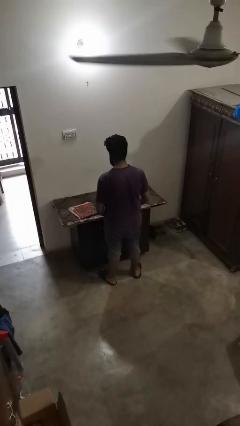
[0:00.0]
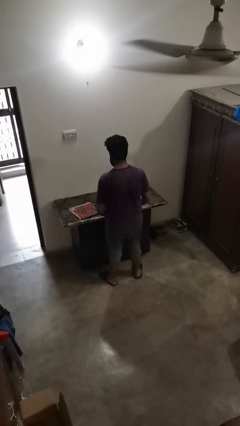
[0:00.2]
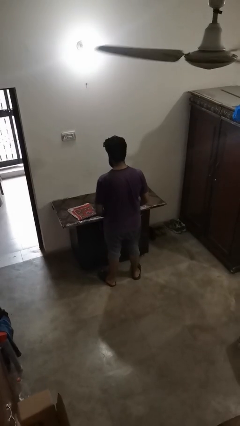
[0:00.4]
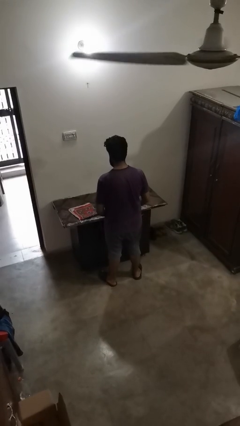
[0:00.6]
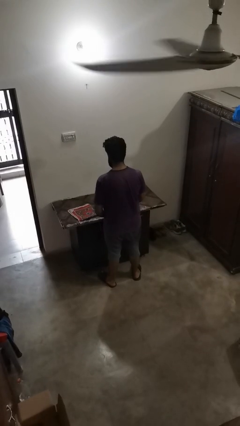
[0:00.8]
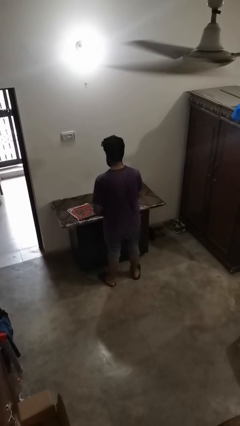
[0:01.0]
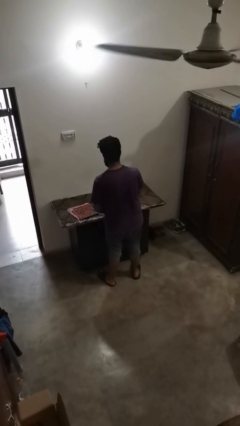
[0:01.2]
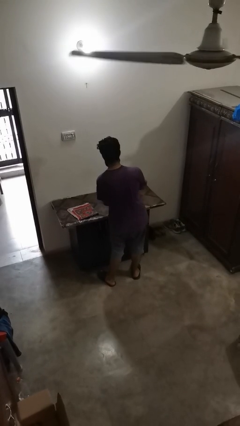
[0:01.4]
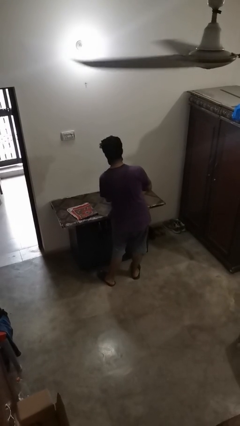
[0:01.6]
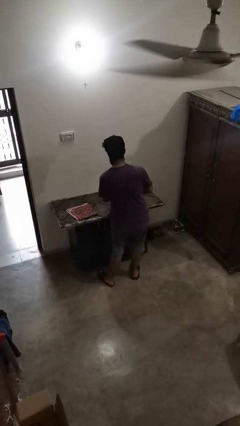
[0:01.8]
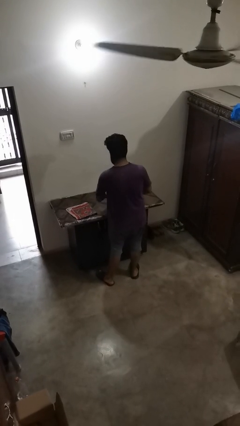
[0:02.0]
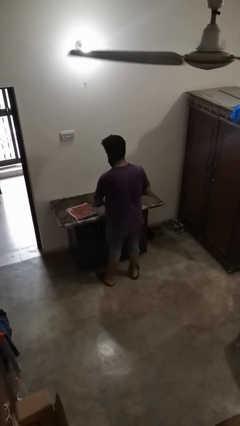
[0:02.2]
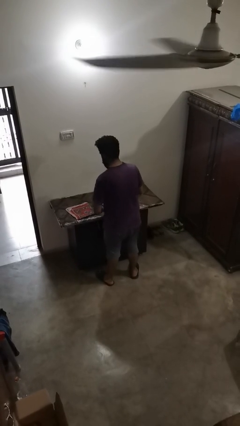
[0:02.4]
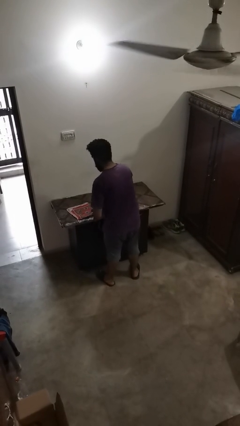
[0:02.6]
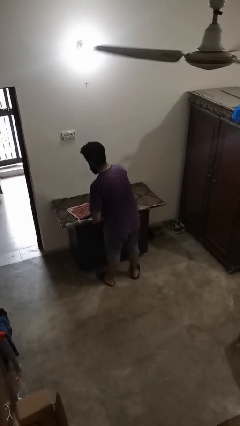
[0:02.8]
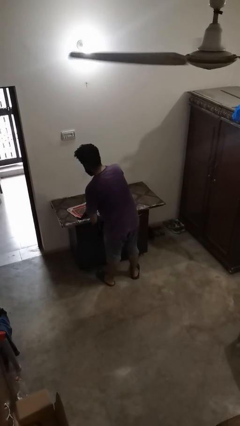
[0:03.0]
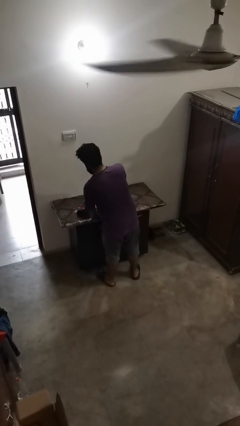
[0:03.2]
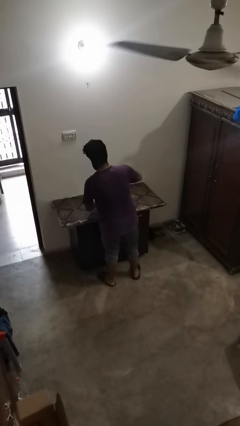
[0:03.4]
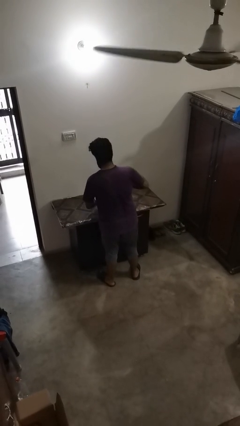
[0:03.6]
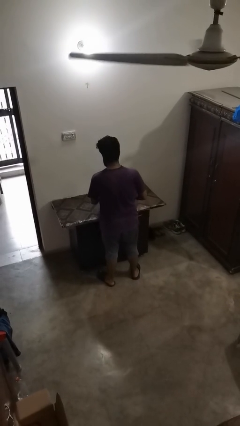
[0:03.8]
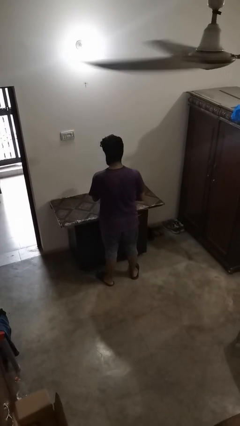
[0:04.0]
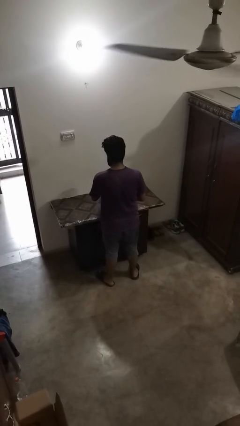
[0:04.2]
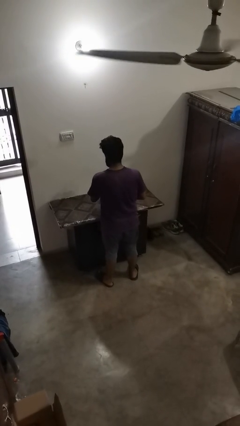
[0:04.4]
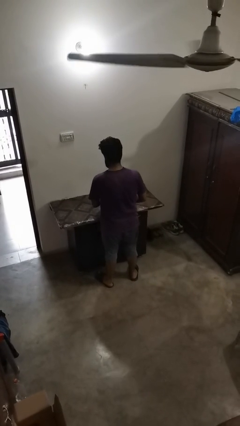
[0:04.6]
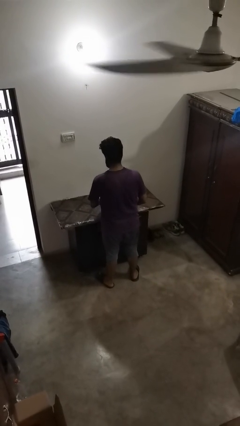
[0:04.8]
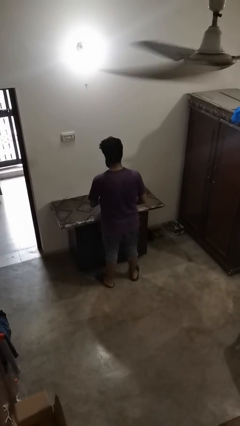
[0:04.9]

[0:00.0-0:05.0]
person folds tablecloth

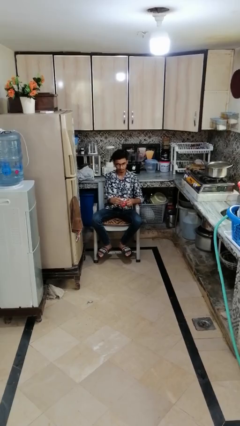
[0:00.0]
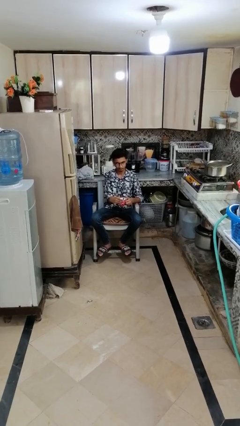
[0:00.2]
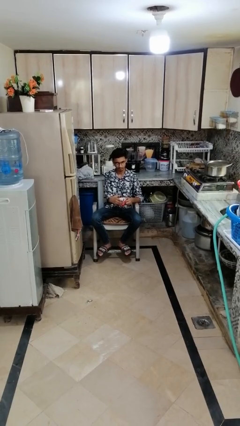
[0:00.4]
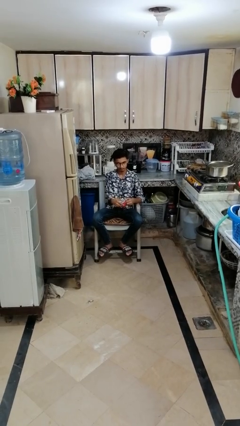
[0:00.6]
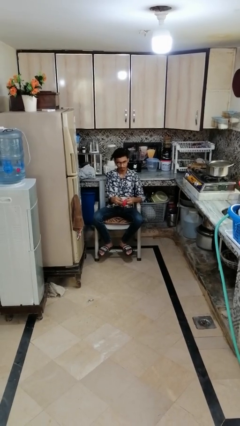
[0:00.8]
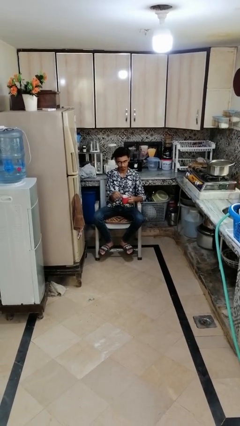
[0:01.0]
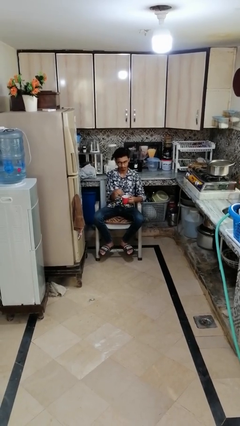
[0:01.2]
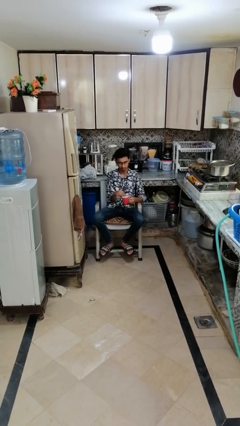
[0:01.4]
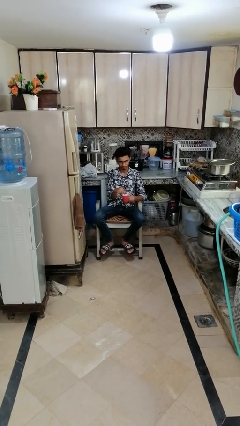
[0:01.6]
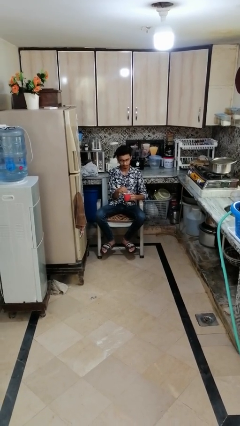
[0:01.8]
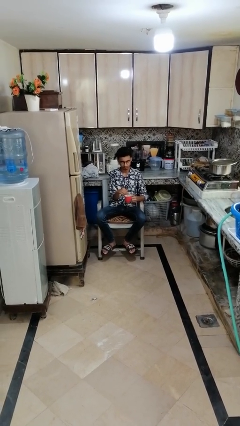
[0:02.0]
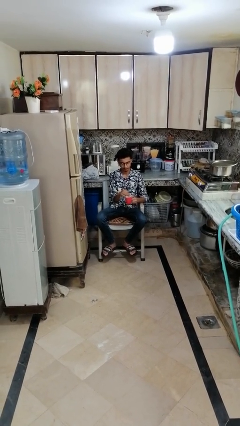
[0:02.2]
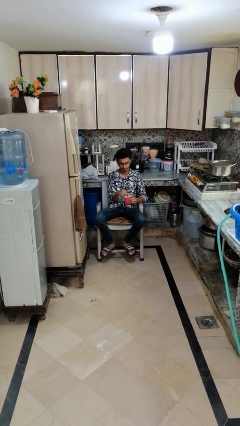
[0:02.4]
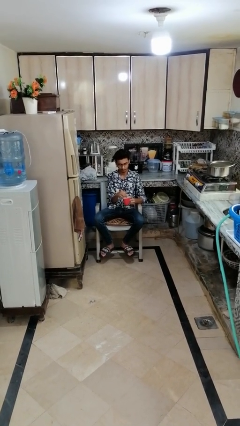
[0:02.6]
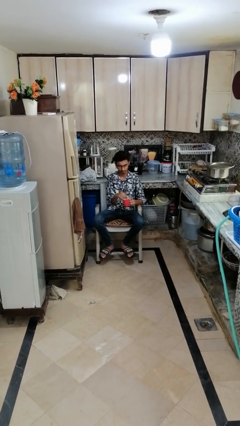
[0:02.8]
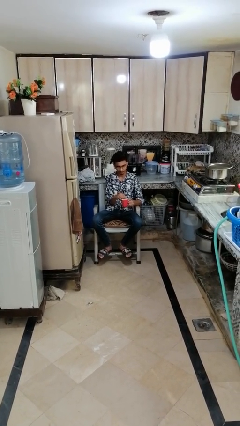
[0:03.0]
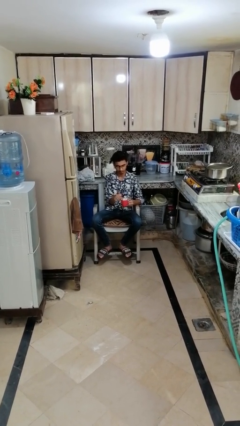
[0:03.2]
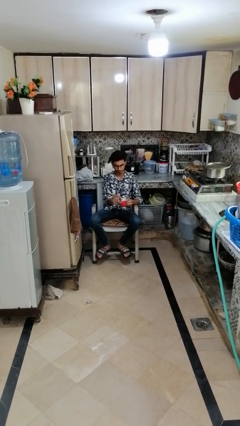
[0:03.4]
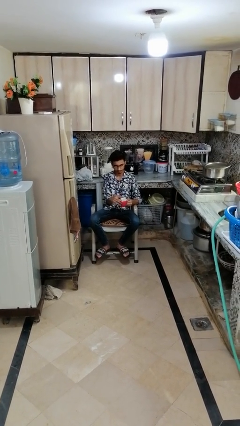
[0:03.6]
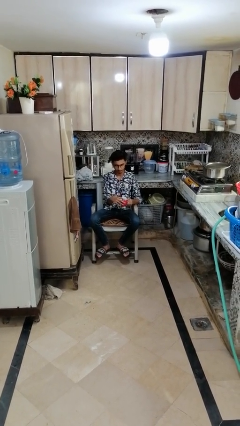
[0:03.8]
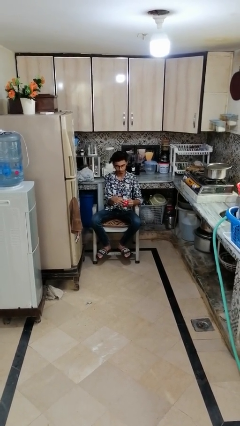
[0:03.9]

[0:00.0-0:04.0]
person stirs mug

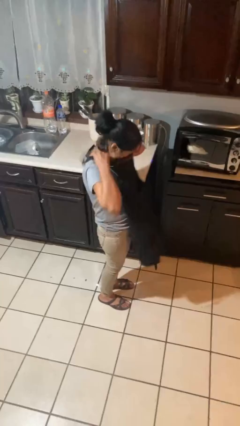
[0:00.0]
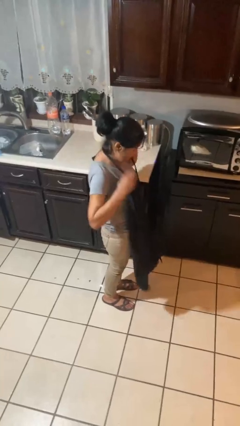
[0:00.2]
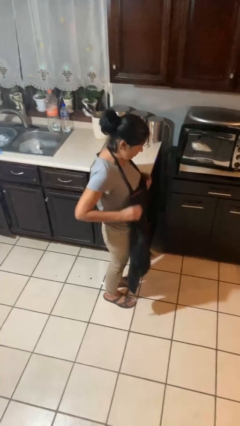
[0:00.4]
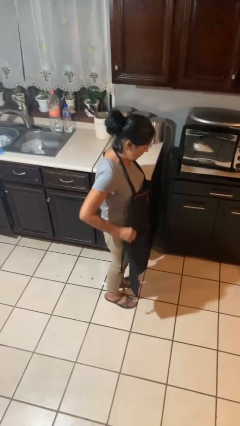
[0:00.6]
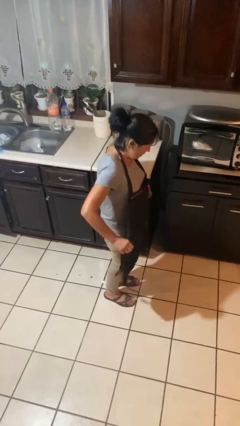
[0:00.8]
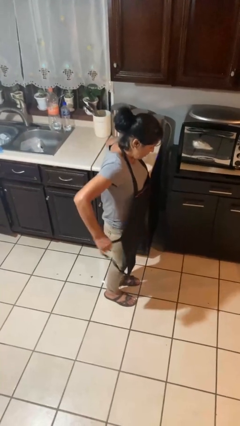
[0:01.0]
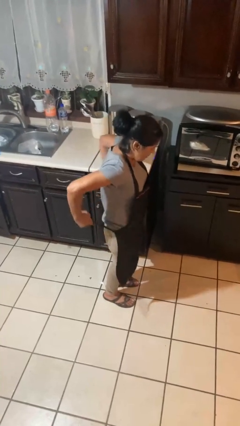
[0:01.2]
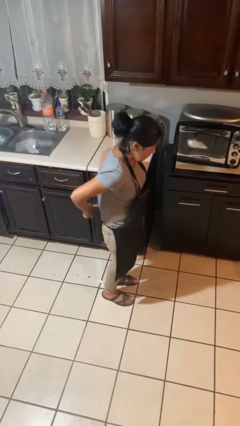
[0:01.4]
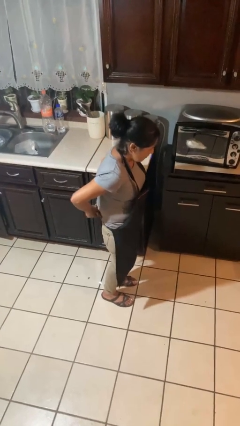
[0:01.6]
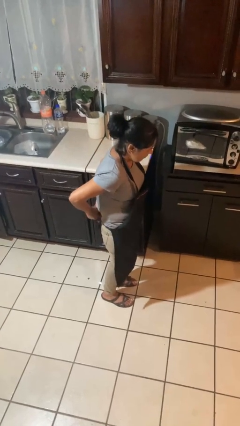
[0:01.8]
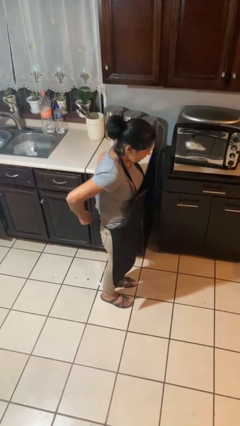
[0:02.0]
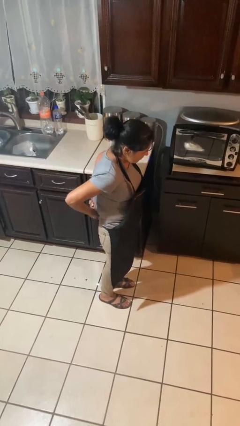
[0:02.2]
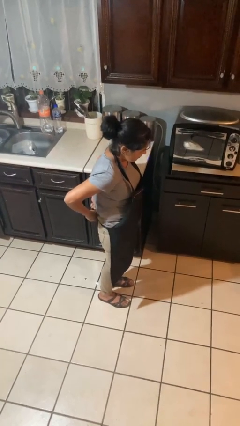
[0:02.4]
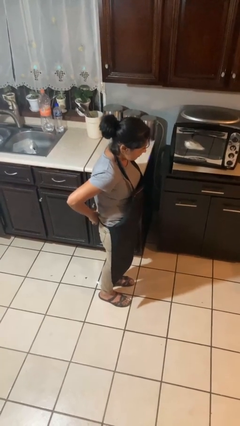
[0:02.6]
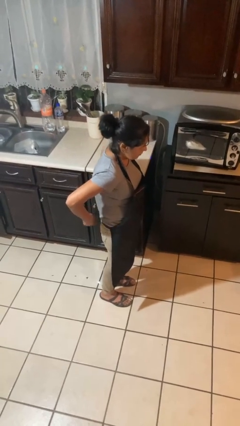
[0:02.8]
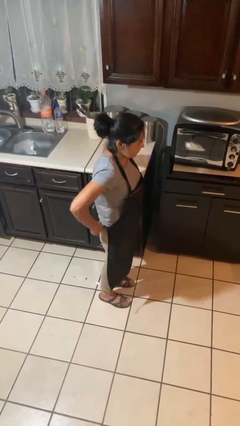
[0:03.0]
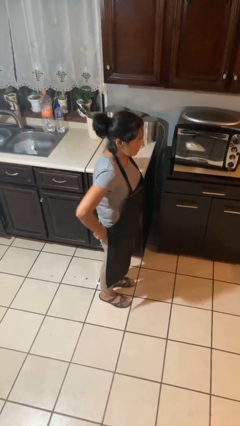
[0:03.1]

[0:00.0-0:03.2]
person puts on apron

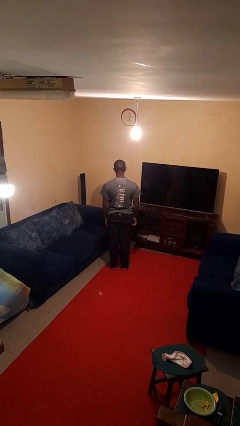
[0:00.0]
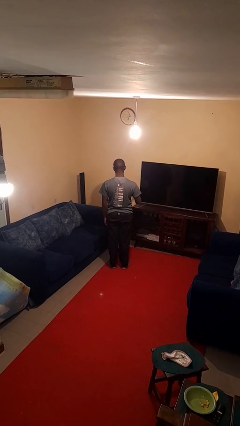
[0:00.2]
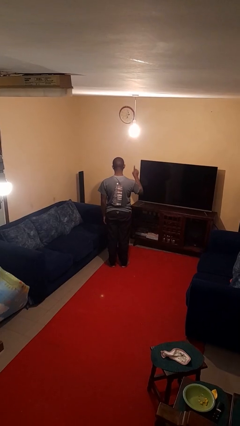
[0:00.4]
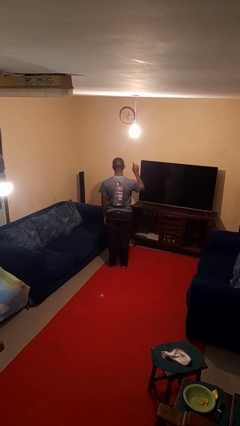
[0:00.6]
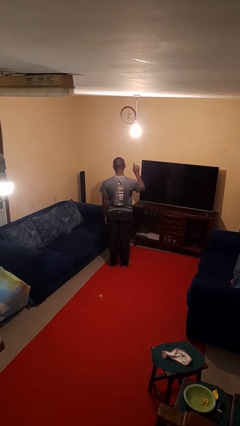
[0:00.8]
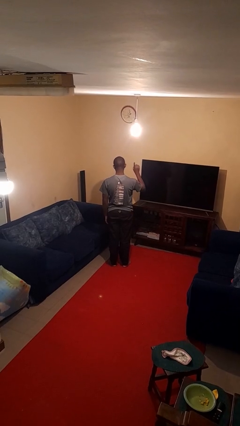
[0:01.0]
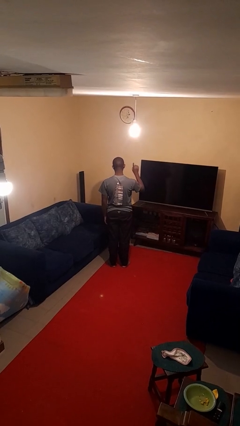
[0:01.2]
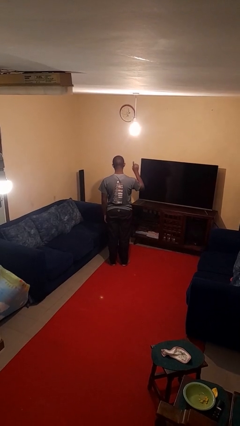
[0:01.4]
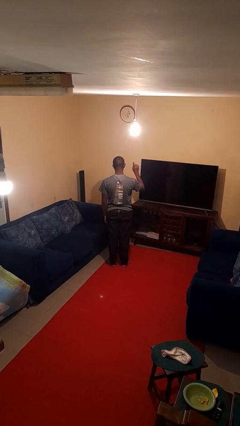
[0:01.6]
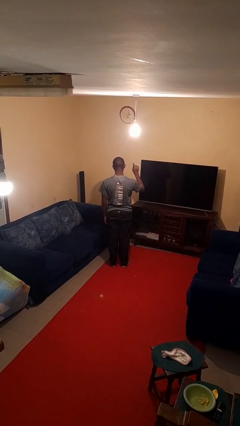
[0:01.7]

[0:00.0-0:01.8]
person gestures number one

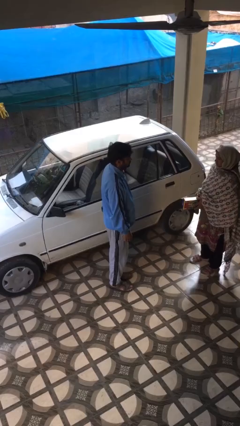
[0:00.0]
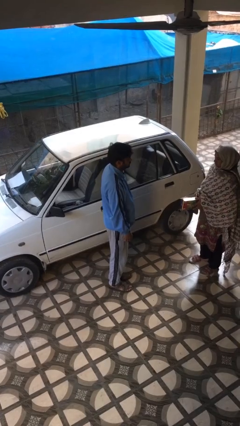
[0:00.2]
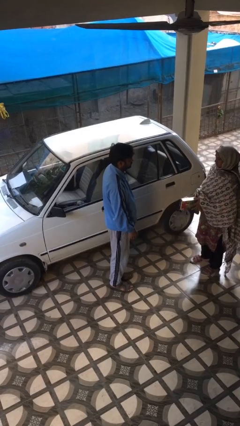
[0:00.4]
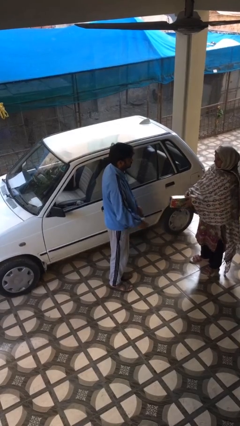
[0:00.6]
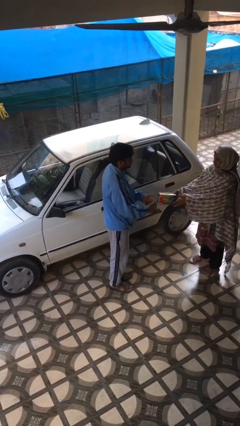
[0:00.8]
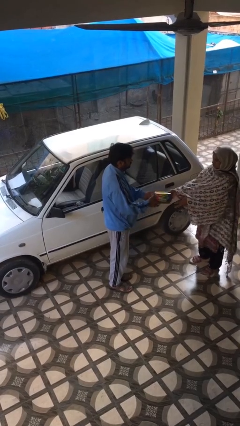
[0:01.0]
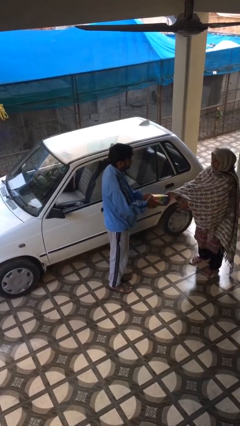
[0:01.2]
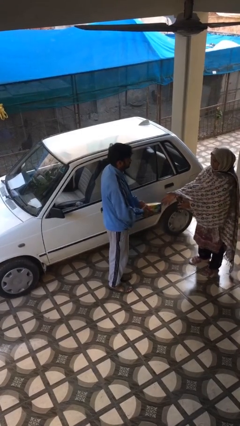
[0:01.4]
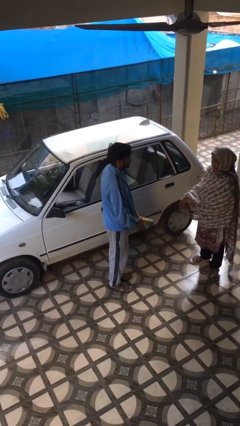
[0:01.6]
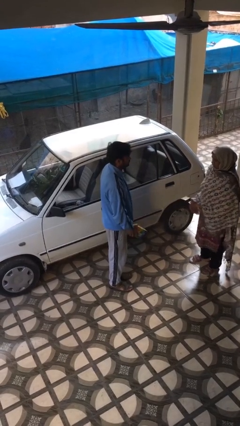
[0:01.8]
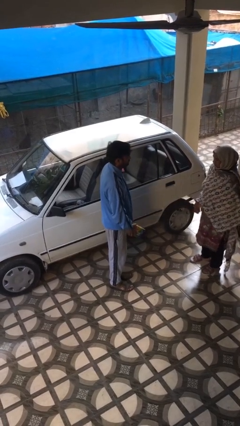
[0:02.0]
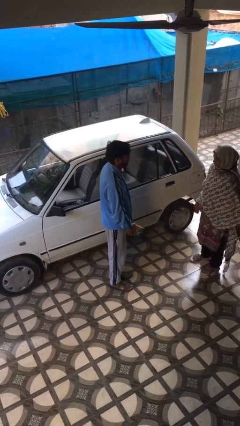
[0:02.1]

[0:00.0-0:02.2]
person transfers object to person

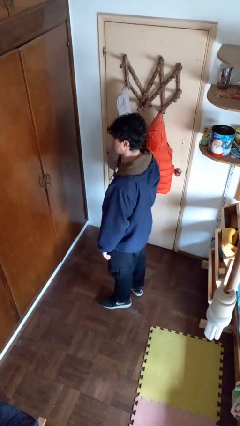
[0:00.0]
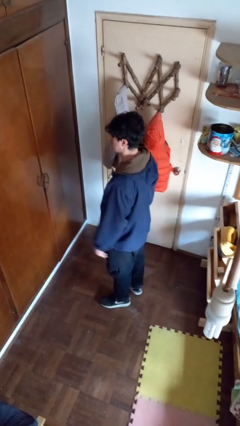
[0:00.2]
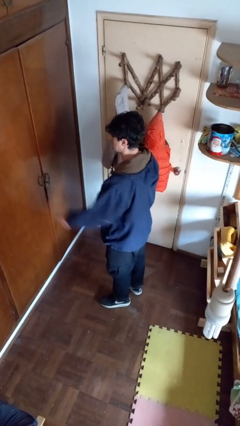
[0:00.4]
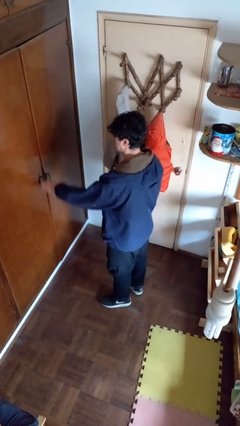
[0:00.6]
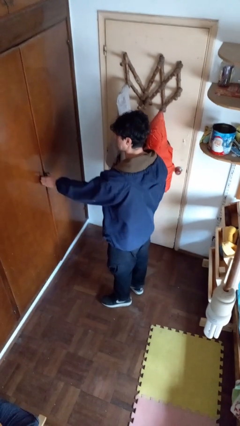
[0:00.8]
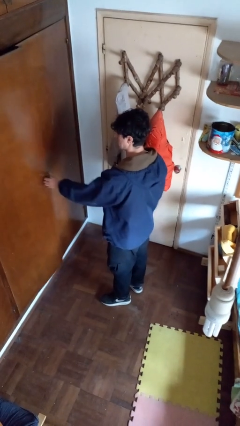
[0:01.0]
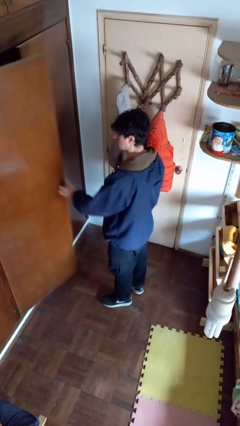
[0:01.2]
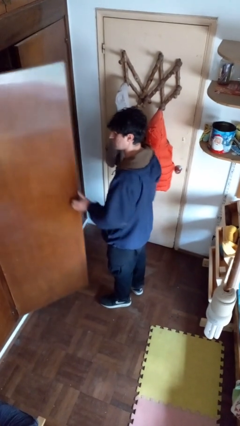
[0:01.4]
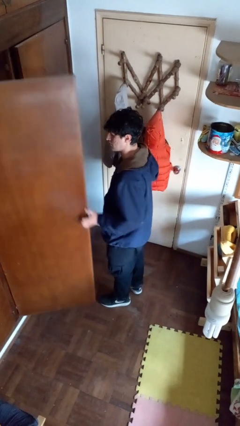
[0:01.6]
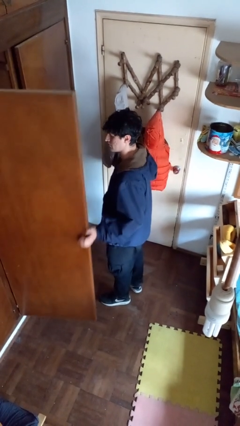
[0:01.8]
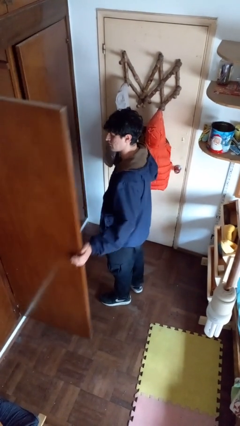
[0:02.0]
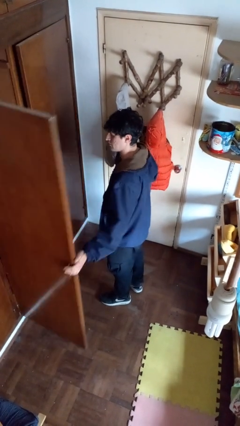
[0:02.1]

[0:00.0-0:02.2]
person opens closet door
